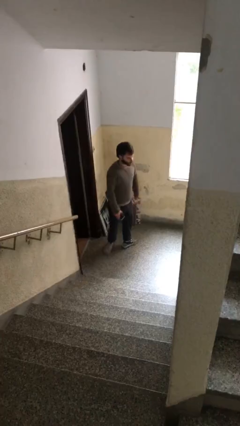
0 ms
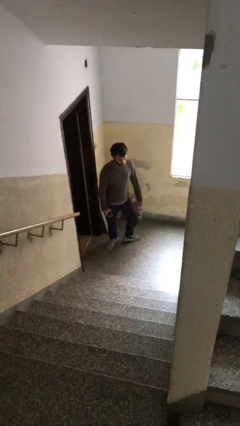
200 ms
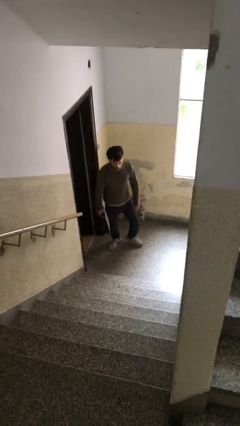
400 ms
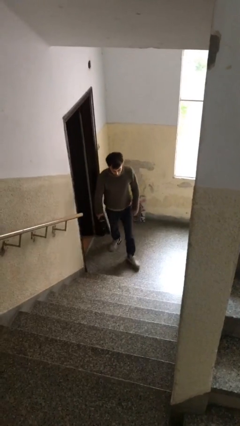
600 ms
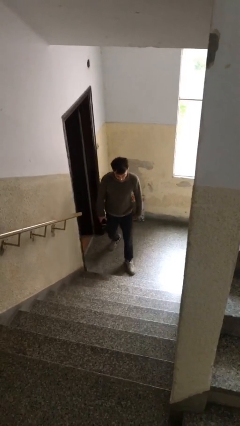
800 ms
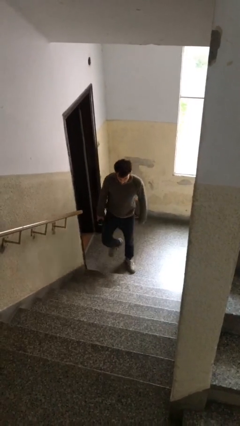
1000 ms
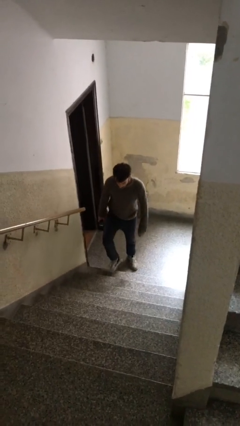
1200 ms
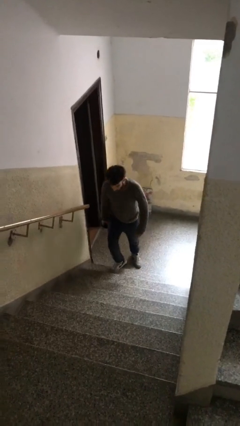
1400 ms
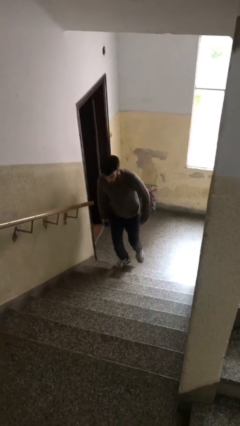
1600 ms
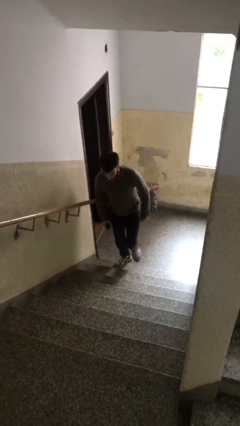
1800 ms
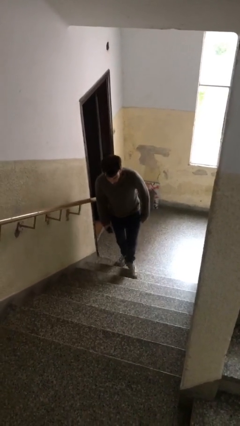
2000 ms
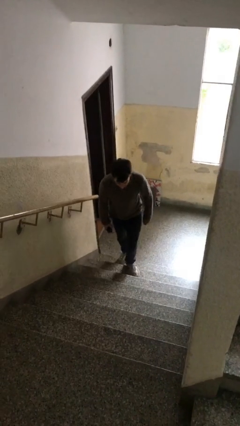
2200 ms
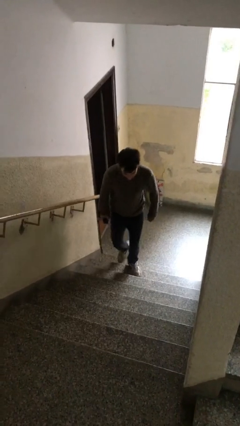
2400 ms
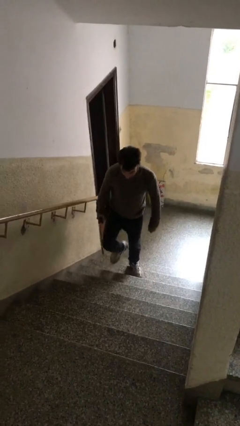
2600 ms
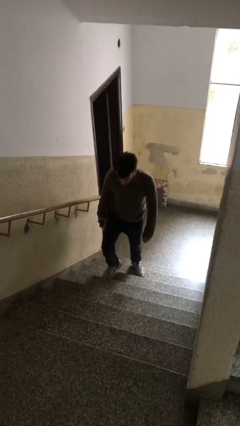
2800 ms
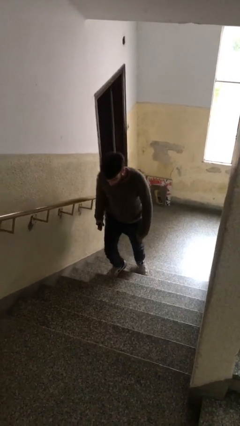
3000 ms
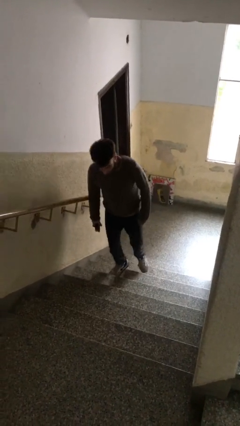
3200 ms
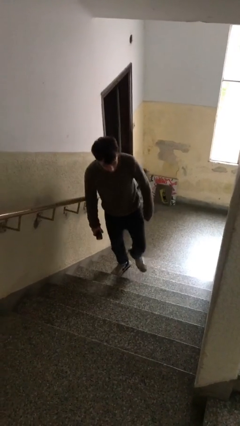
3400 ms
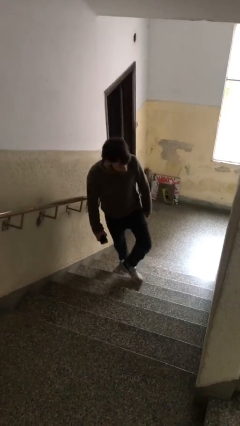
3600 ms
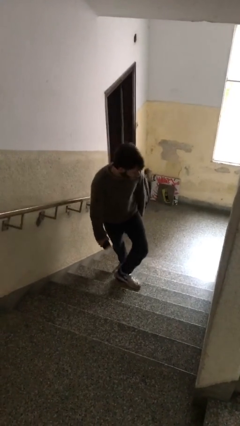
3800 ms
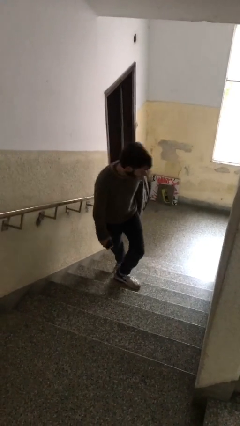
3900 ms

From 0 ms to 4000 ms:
person climbs up stairs

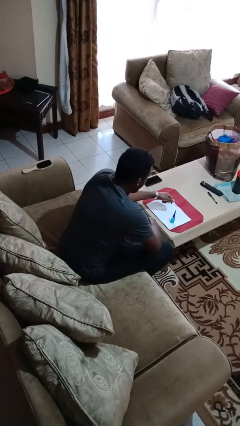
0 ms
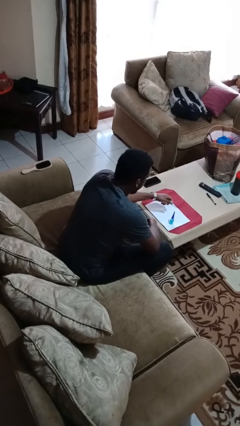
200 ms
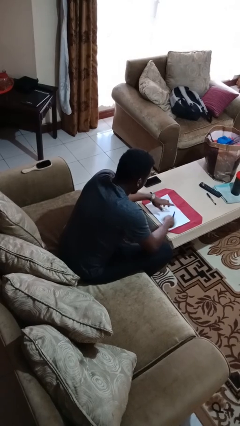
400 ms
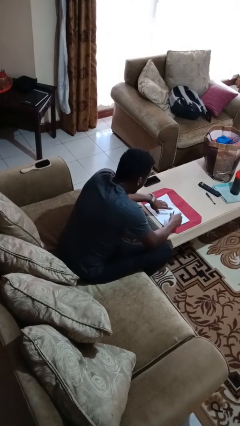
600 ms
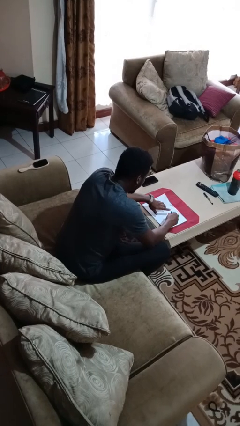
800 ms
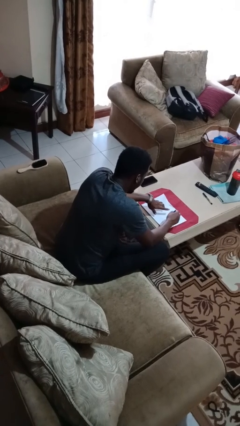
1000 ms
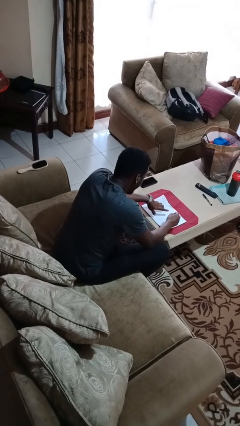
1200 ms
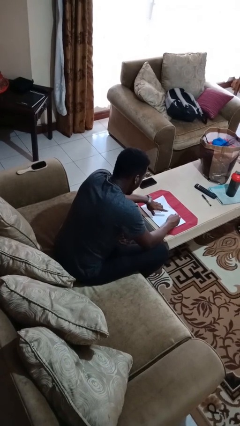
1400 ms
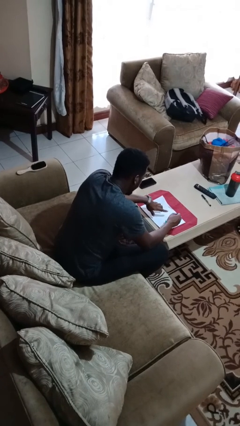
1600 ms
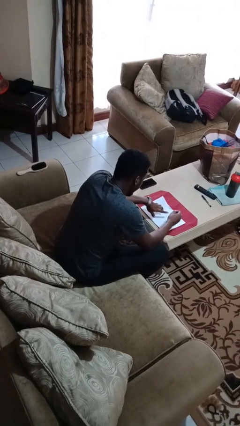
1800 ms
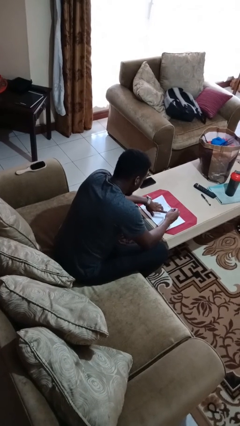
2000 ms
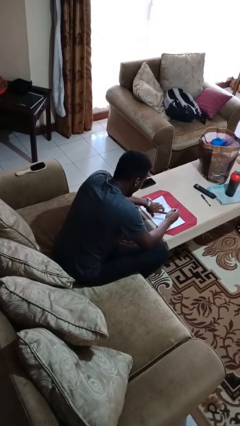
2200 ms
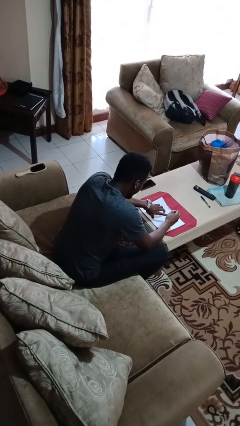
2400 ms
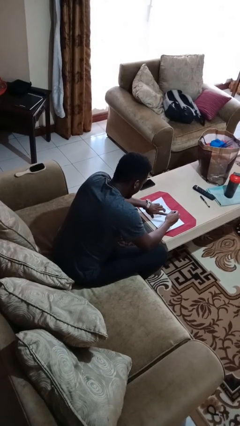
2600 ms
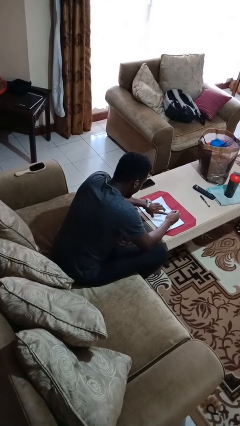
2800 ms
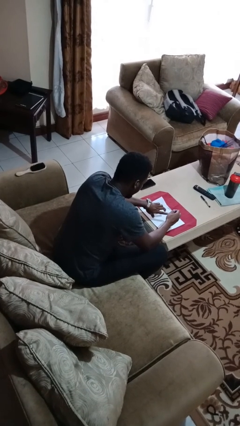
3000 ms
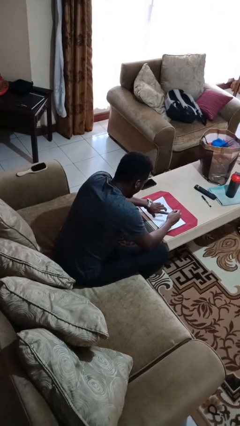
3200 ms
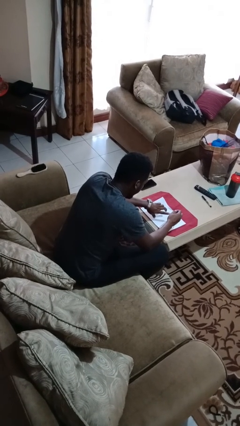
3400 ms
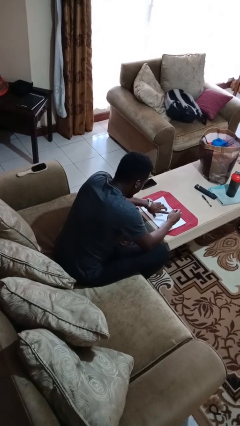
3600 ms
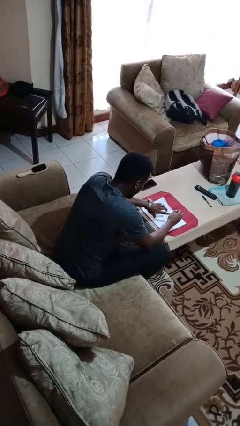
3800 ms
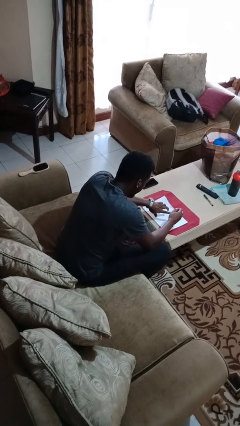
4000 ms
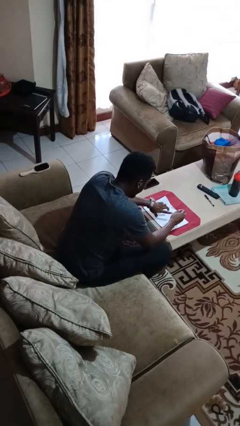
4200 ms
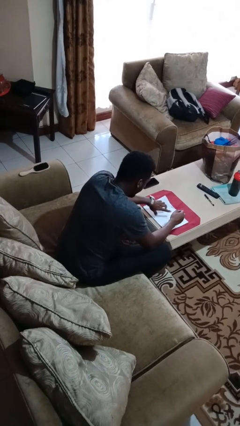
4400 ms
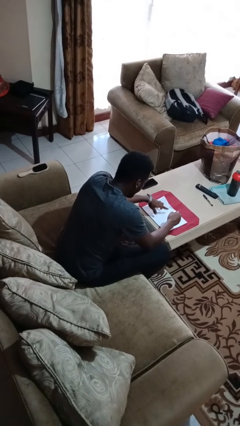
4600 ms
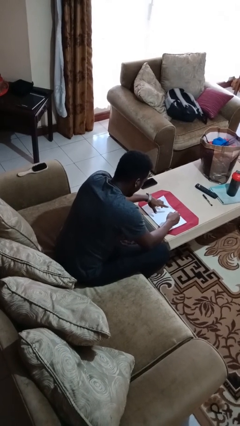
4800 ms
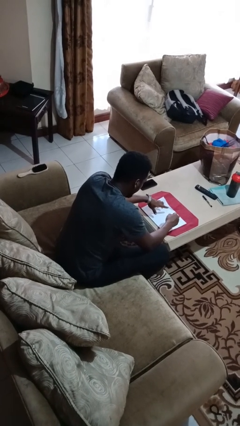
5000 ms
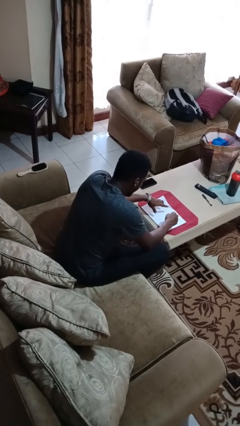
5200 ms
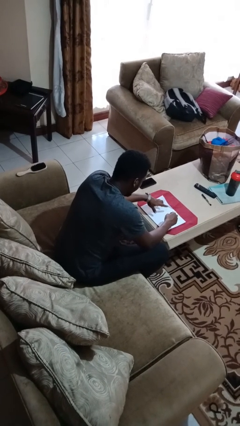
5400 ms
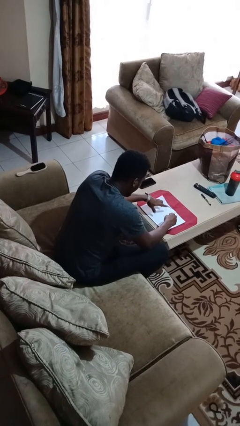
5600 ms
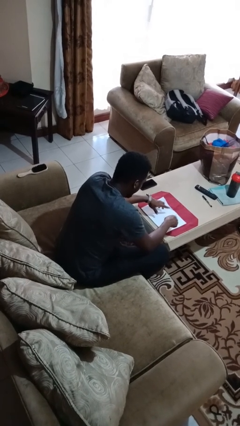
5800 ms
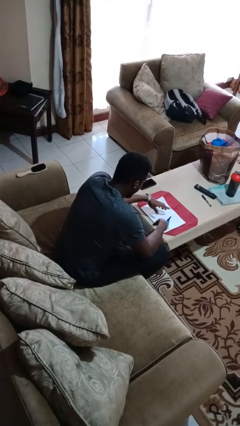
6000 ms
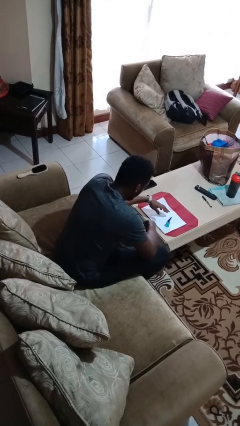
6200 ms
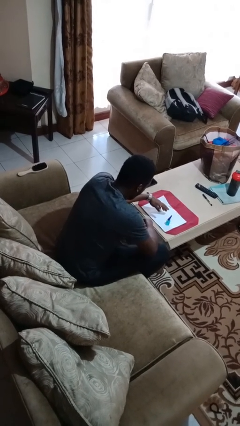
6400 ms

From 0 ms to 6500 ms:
person paints fingernails

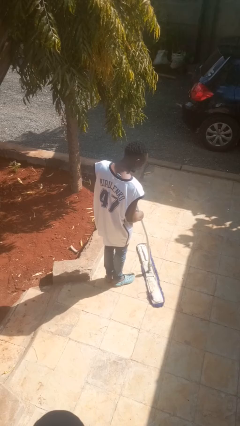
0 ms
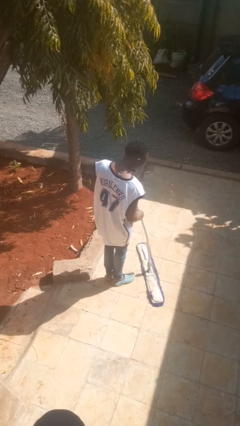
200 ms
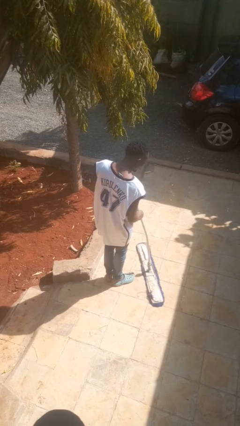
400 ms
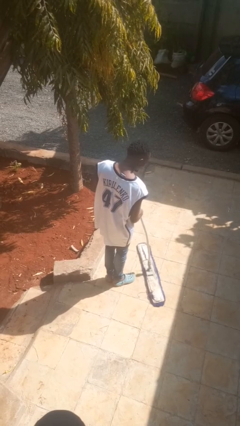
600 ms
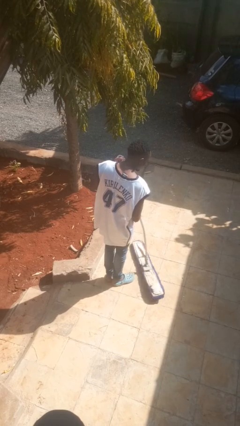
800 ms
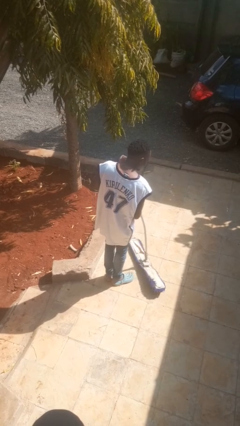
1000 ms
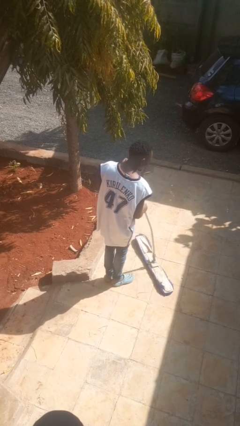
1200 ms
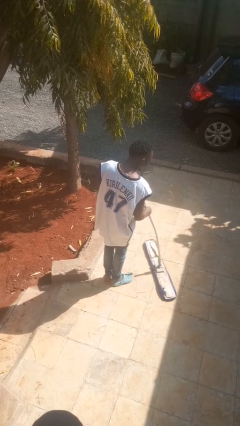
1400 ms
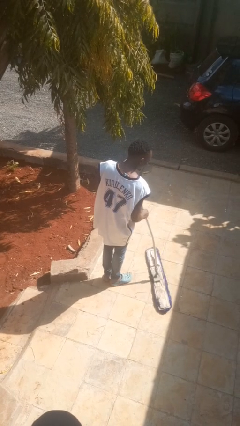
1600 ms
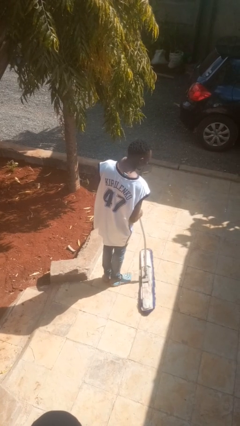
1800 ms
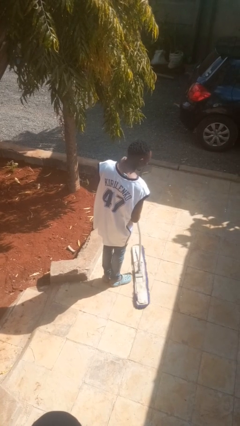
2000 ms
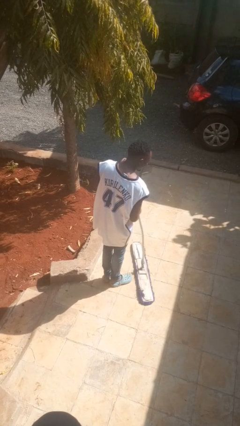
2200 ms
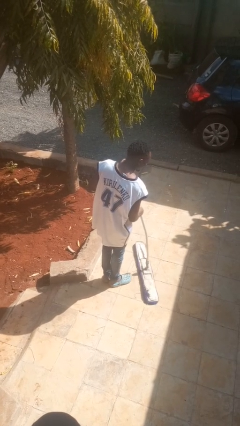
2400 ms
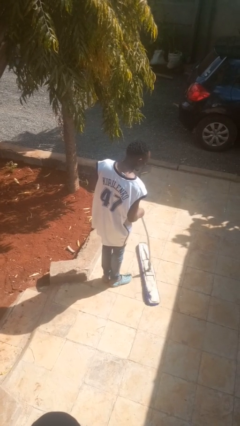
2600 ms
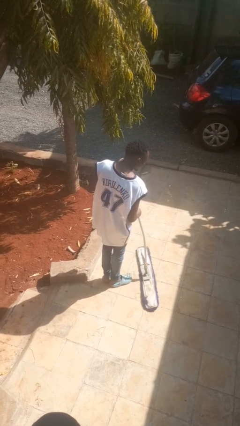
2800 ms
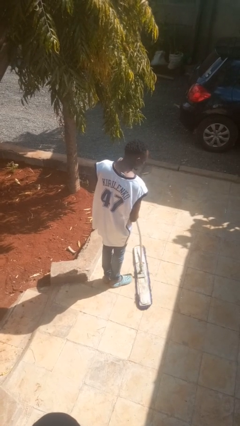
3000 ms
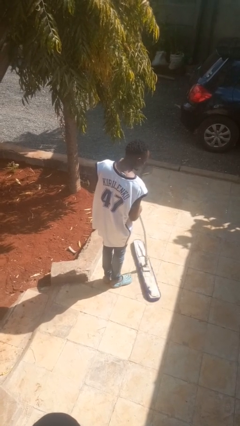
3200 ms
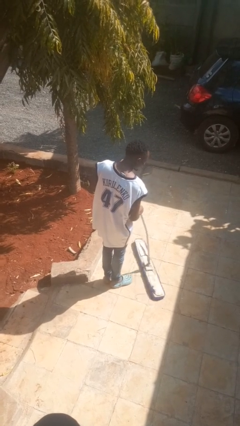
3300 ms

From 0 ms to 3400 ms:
person mops

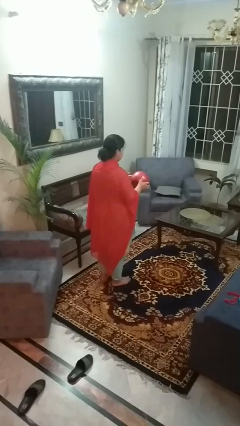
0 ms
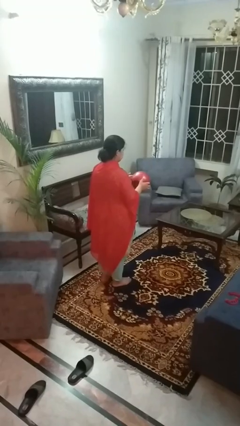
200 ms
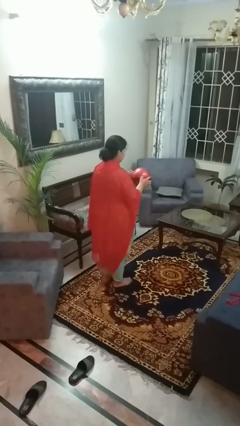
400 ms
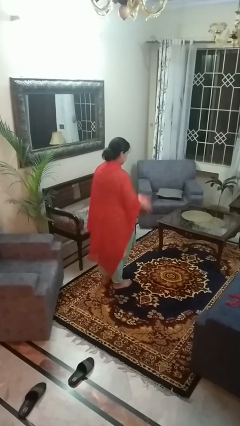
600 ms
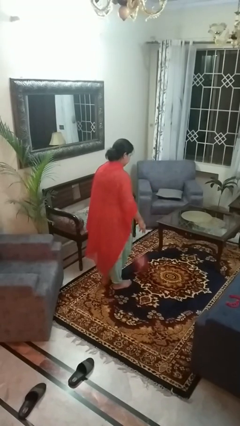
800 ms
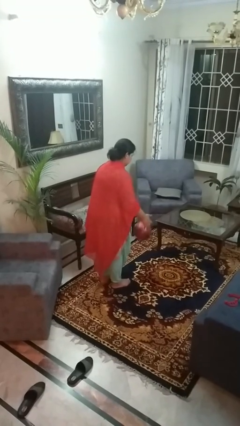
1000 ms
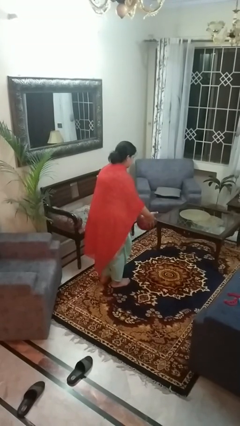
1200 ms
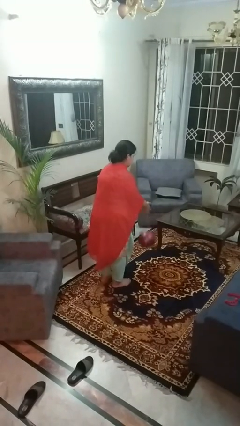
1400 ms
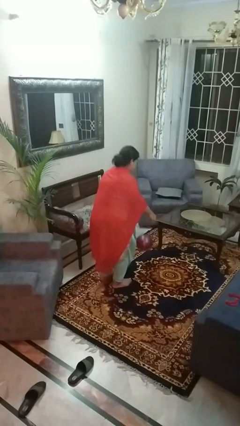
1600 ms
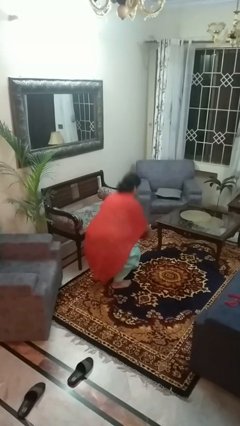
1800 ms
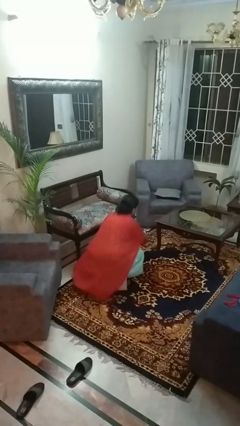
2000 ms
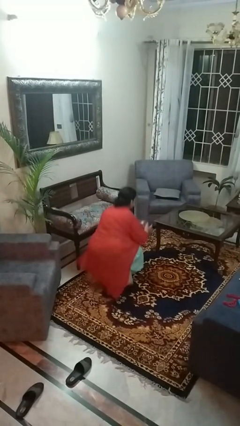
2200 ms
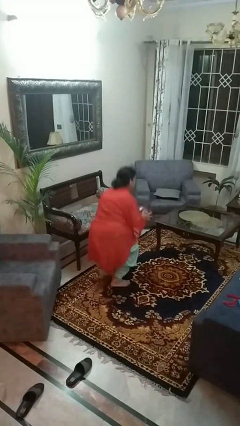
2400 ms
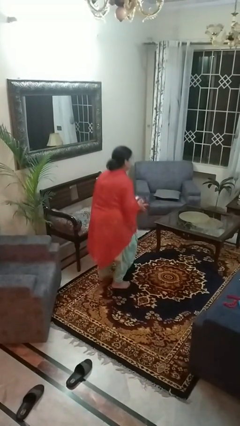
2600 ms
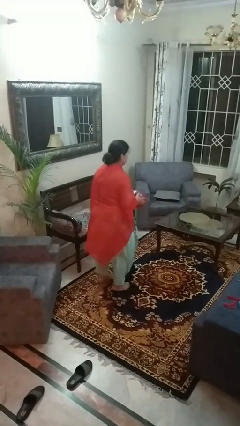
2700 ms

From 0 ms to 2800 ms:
person bounces ball on floor

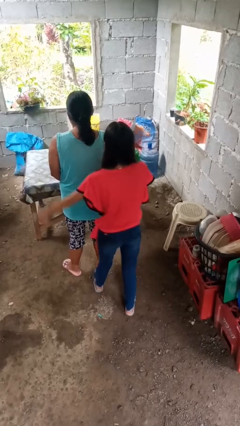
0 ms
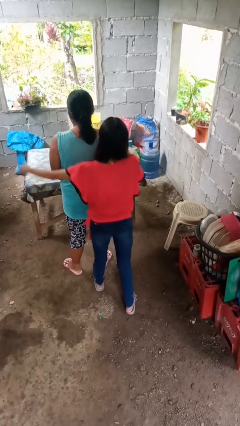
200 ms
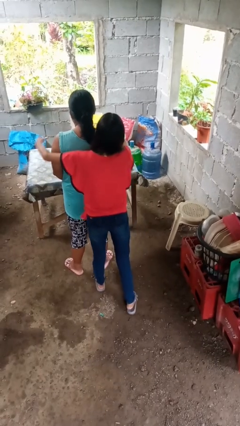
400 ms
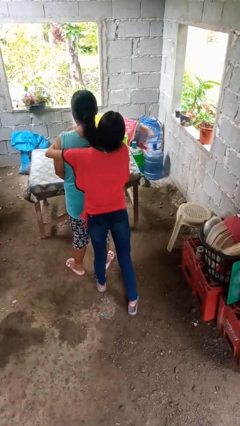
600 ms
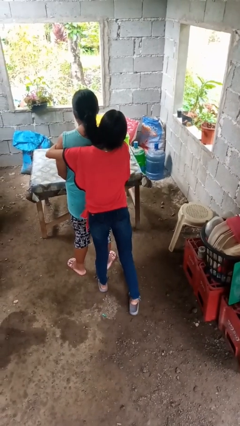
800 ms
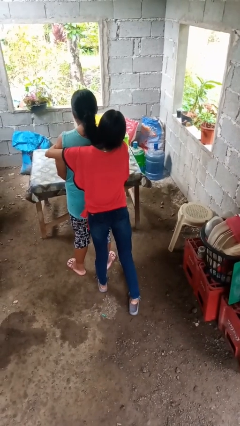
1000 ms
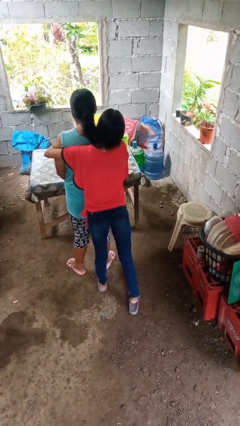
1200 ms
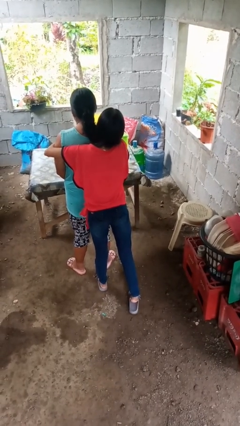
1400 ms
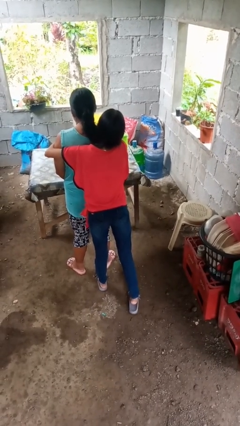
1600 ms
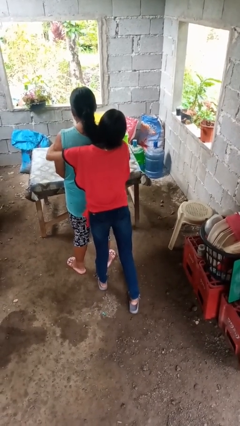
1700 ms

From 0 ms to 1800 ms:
person hugs person from behind
